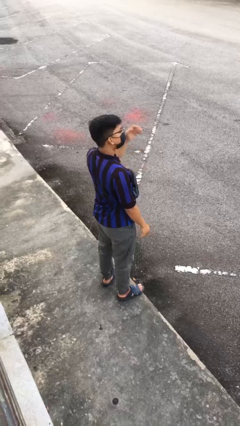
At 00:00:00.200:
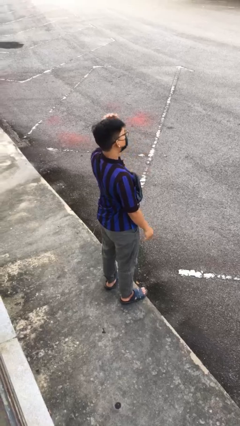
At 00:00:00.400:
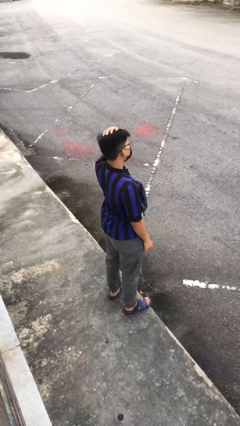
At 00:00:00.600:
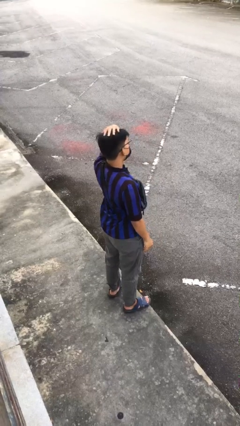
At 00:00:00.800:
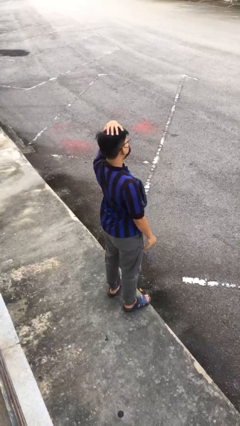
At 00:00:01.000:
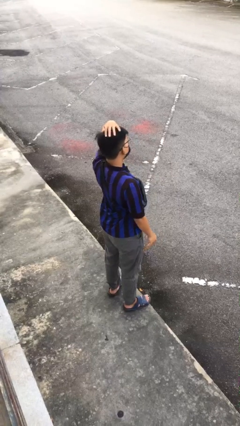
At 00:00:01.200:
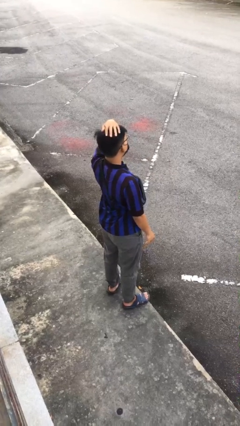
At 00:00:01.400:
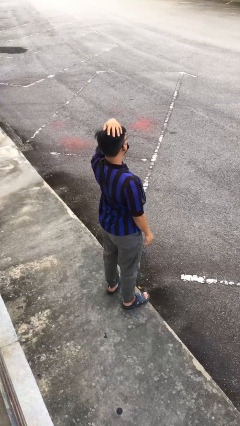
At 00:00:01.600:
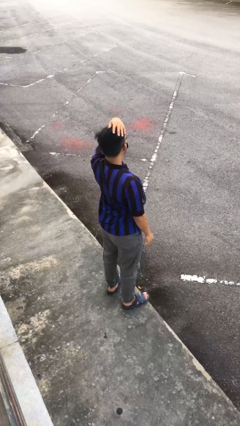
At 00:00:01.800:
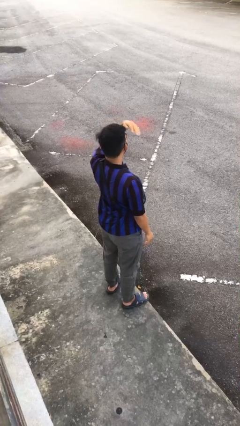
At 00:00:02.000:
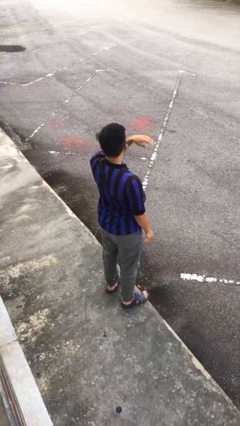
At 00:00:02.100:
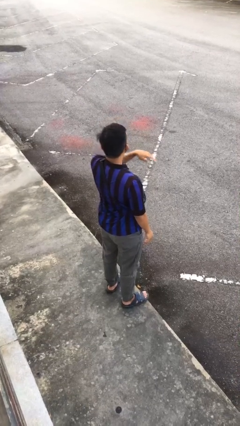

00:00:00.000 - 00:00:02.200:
person pats head

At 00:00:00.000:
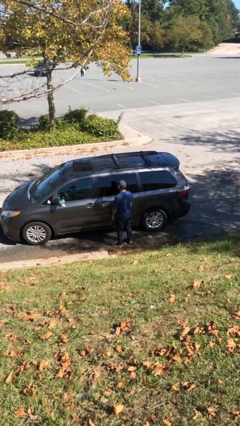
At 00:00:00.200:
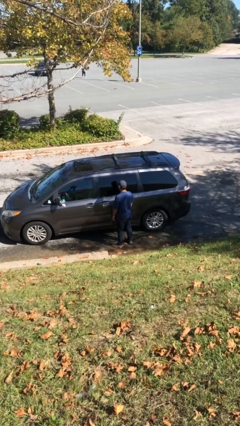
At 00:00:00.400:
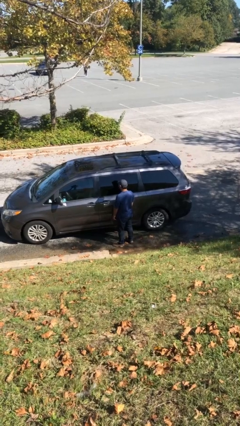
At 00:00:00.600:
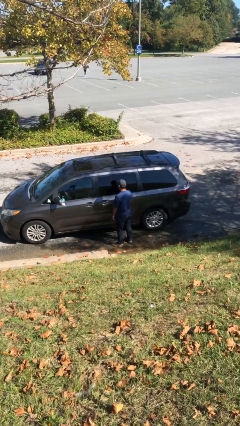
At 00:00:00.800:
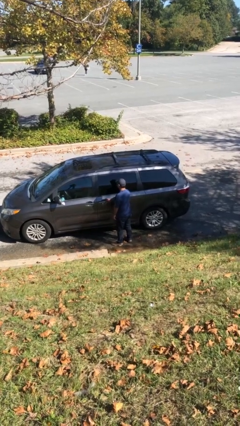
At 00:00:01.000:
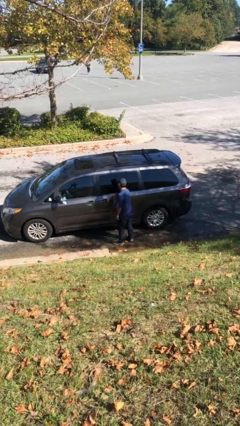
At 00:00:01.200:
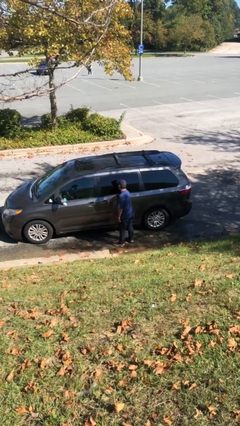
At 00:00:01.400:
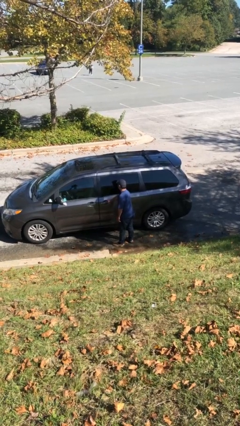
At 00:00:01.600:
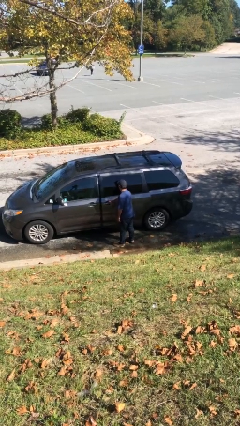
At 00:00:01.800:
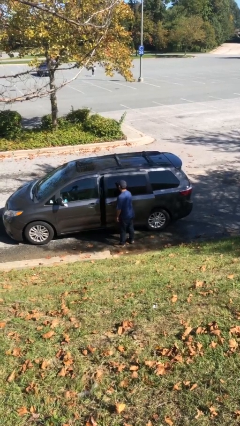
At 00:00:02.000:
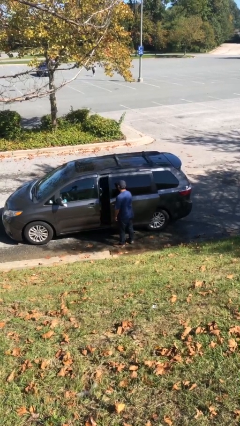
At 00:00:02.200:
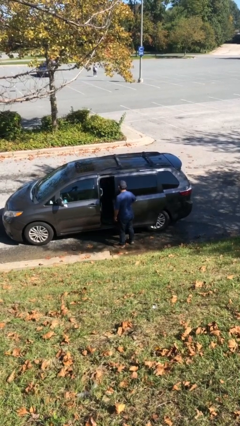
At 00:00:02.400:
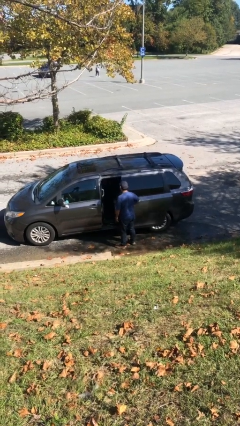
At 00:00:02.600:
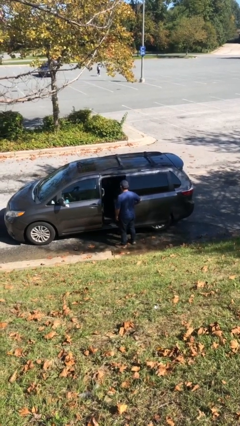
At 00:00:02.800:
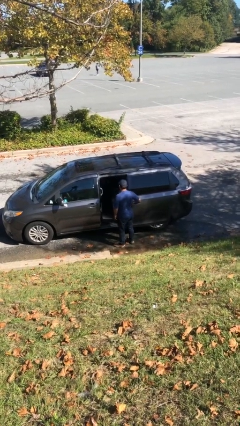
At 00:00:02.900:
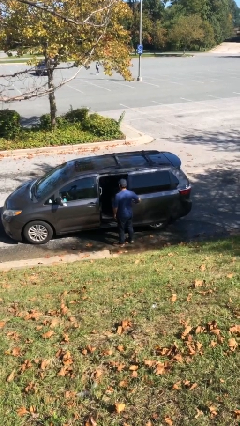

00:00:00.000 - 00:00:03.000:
person opens car door

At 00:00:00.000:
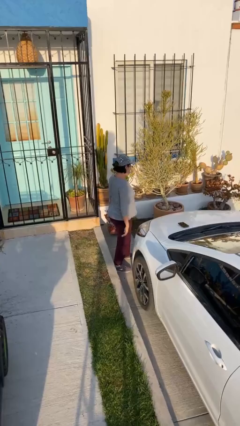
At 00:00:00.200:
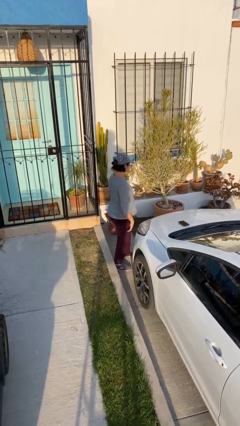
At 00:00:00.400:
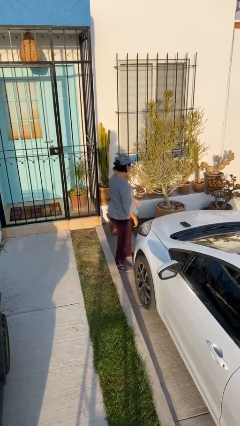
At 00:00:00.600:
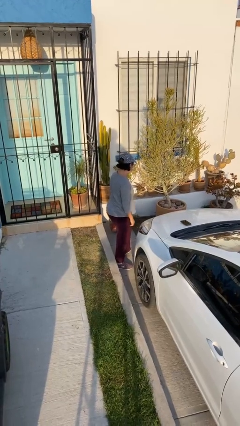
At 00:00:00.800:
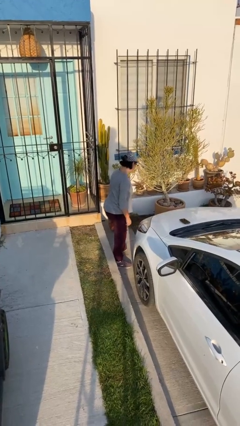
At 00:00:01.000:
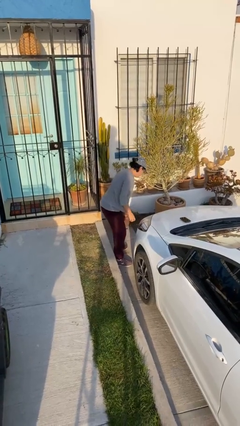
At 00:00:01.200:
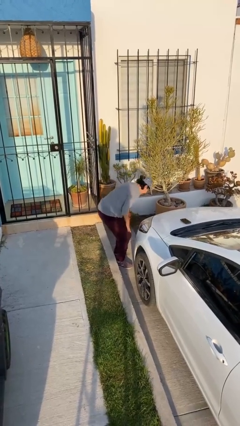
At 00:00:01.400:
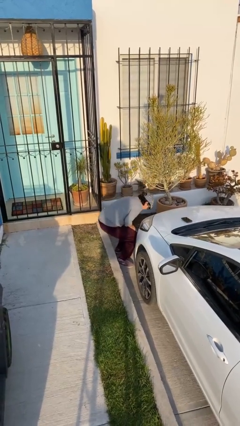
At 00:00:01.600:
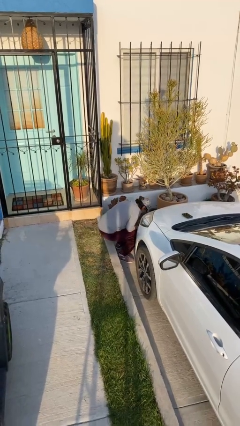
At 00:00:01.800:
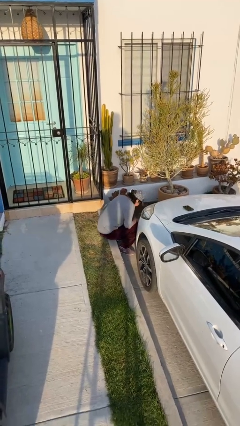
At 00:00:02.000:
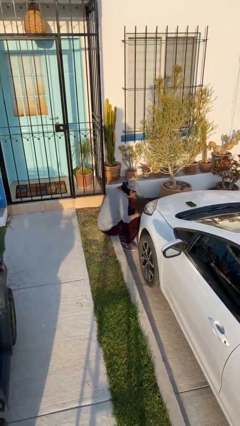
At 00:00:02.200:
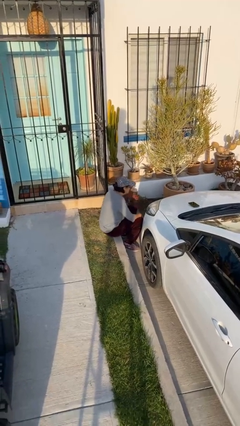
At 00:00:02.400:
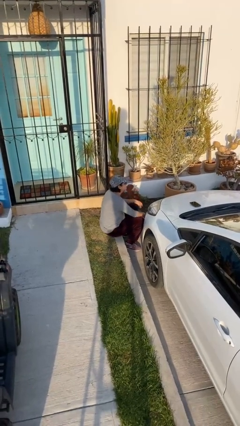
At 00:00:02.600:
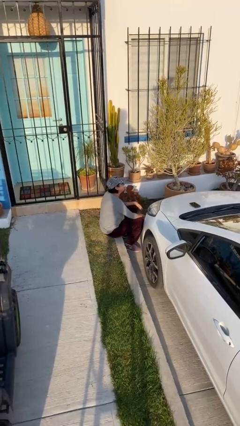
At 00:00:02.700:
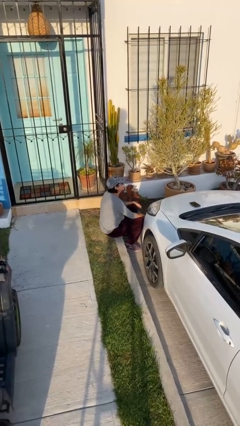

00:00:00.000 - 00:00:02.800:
person sits down

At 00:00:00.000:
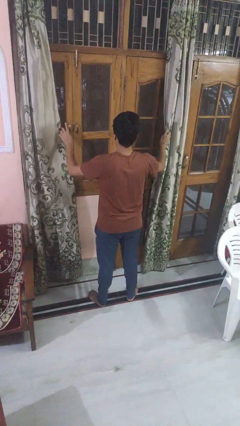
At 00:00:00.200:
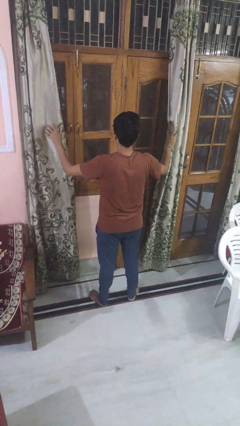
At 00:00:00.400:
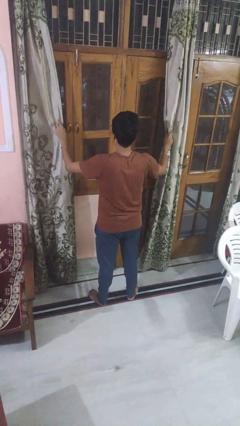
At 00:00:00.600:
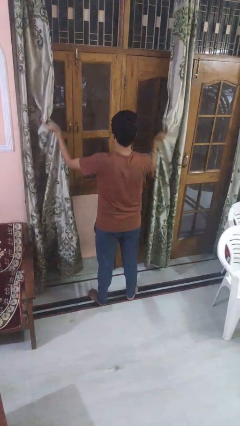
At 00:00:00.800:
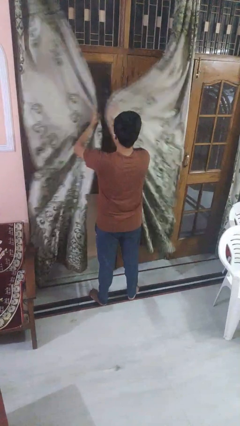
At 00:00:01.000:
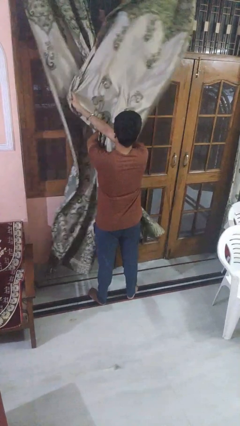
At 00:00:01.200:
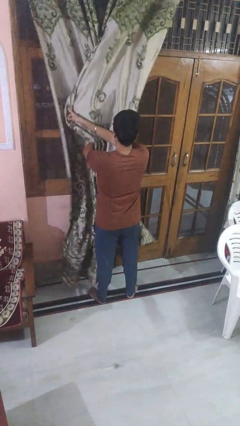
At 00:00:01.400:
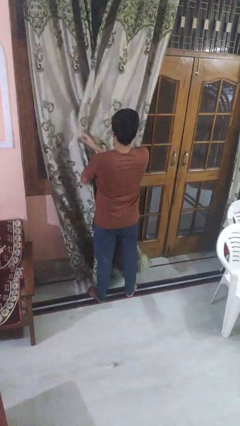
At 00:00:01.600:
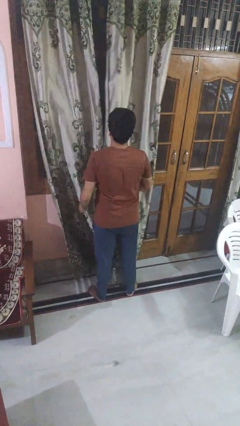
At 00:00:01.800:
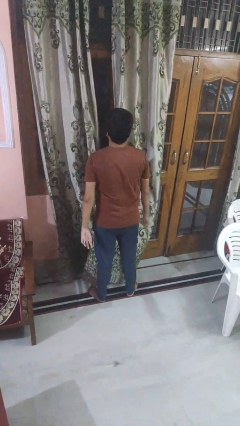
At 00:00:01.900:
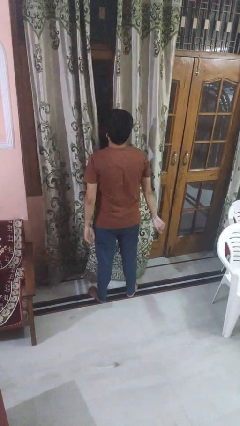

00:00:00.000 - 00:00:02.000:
person closes curtains

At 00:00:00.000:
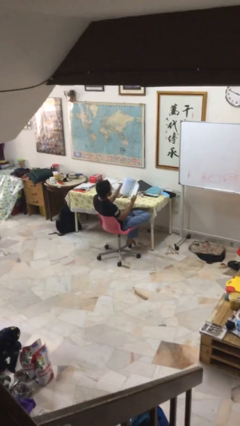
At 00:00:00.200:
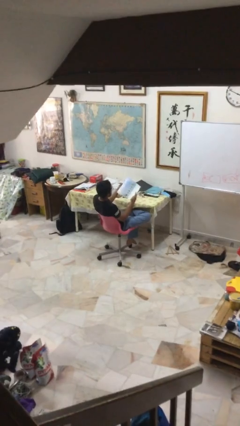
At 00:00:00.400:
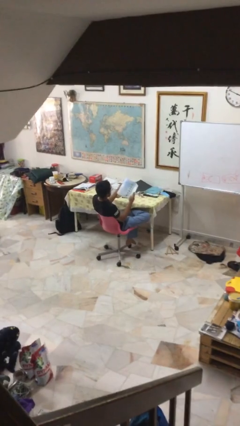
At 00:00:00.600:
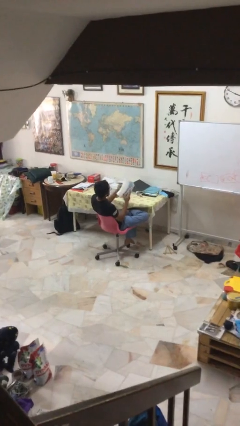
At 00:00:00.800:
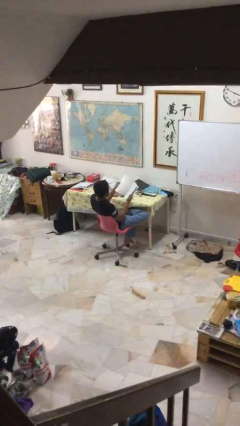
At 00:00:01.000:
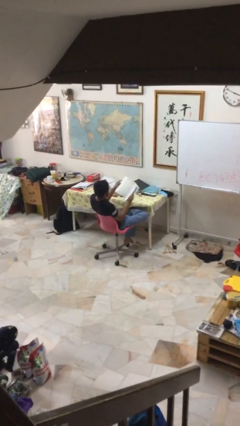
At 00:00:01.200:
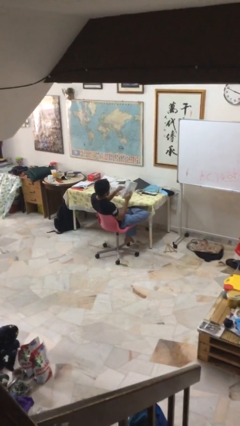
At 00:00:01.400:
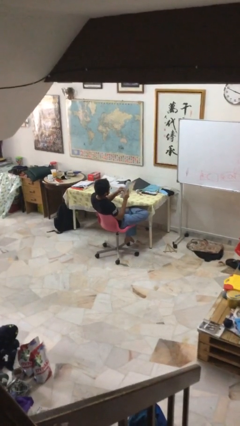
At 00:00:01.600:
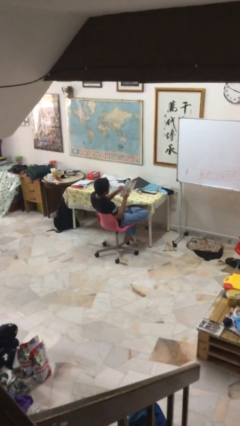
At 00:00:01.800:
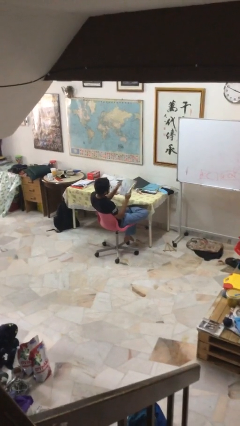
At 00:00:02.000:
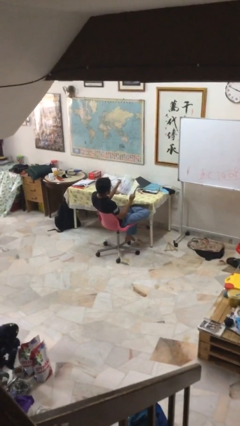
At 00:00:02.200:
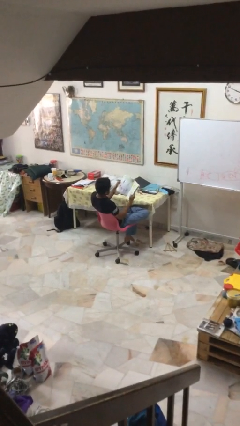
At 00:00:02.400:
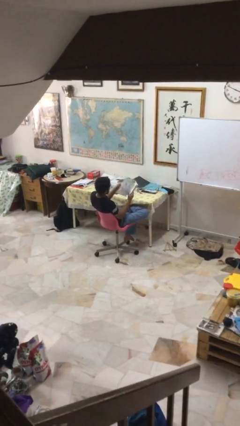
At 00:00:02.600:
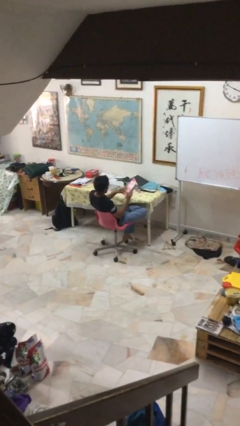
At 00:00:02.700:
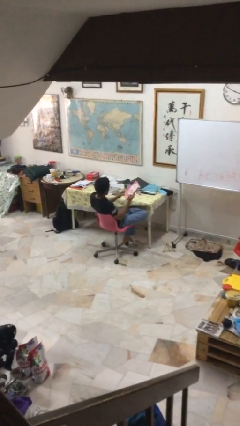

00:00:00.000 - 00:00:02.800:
person reads document

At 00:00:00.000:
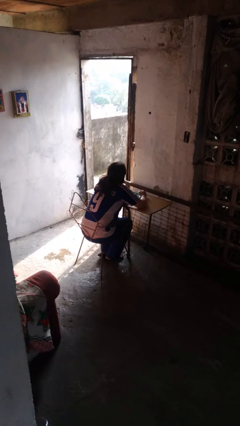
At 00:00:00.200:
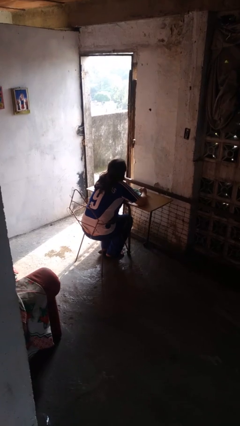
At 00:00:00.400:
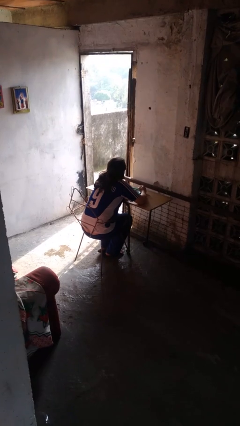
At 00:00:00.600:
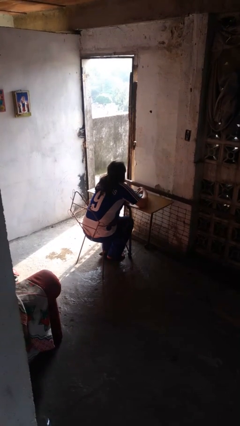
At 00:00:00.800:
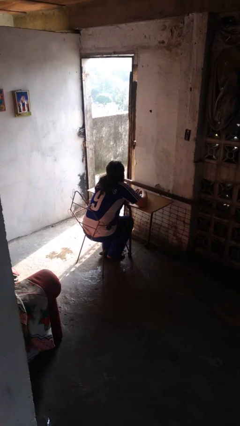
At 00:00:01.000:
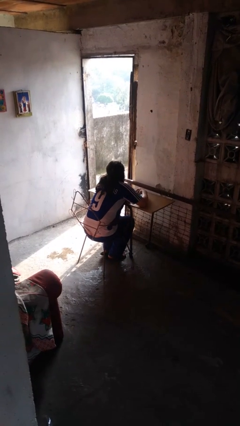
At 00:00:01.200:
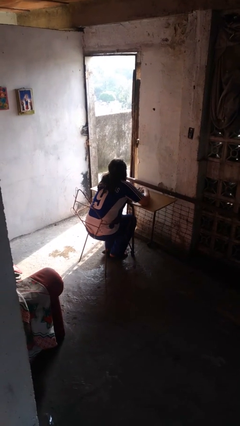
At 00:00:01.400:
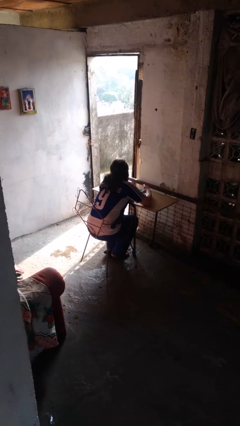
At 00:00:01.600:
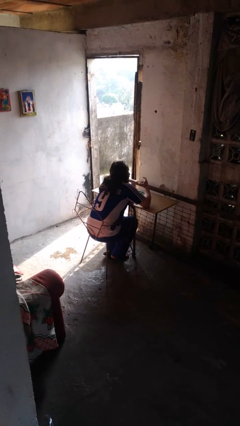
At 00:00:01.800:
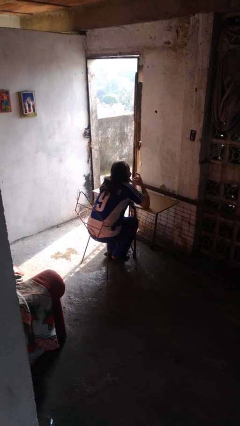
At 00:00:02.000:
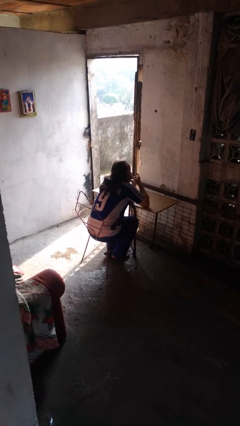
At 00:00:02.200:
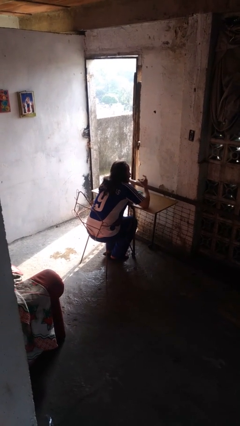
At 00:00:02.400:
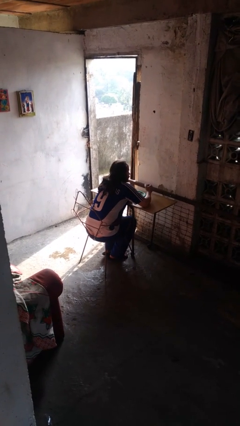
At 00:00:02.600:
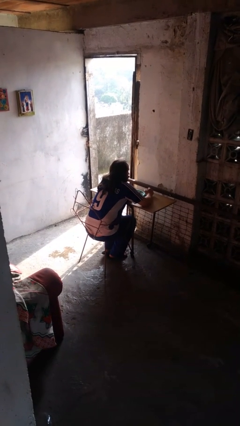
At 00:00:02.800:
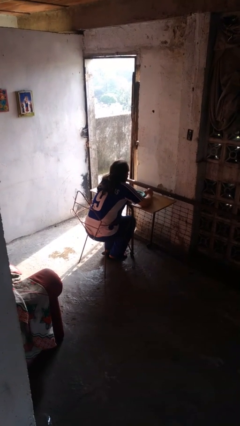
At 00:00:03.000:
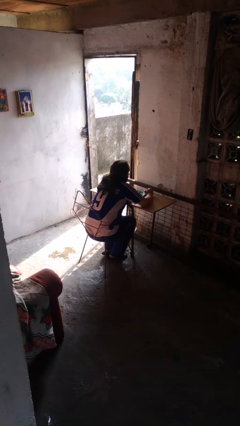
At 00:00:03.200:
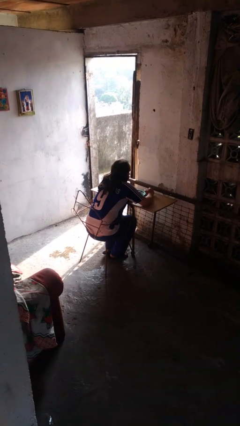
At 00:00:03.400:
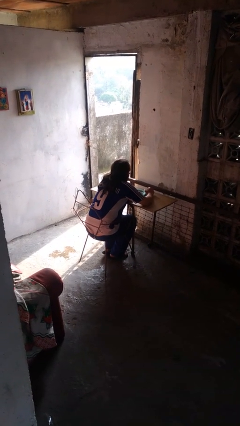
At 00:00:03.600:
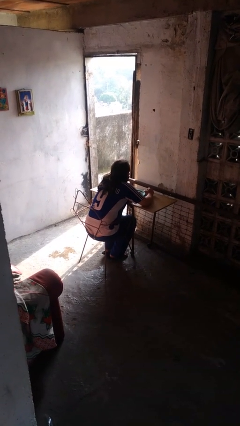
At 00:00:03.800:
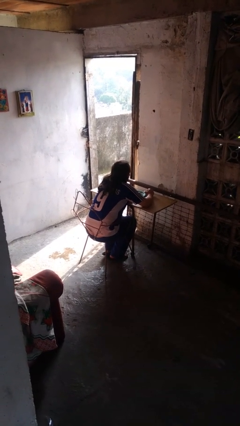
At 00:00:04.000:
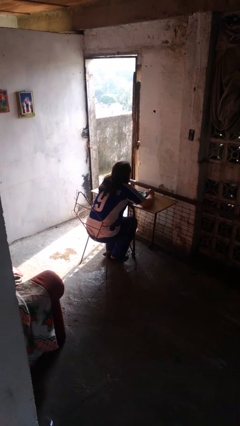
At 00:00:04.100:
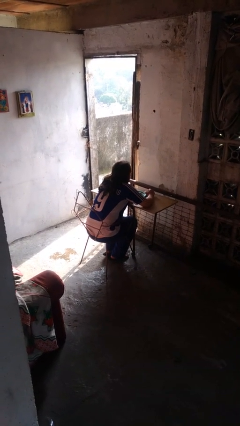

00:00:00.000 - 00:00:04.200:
person eats with hands
